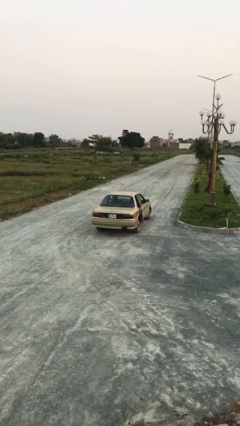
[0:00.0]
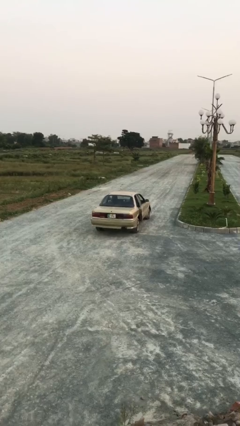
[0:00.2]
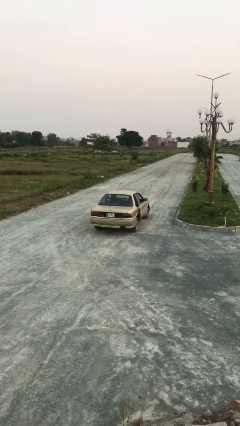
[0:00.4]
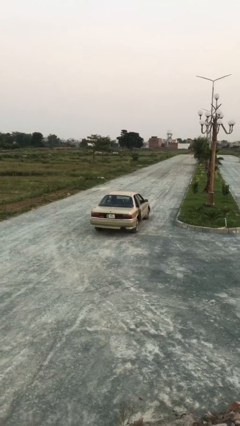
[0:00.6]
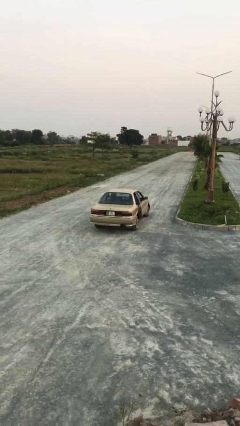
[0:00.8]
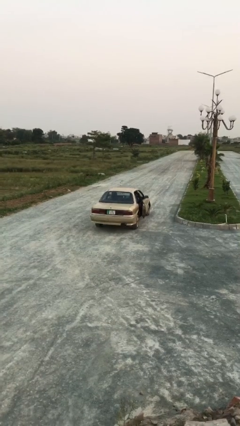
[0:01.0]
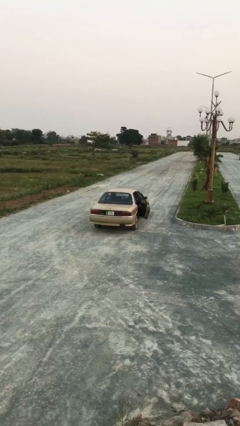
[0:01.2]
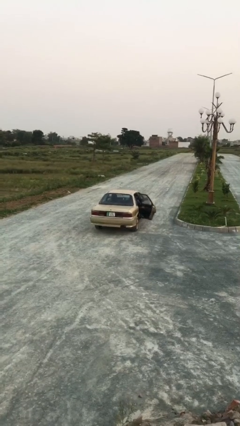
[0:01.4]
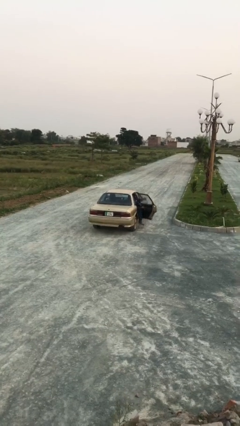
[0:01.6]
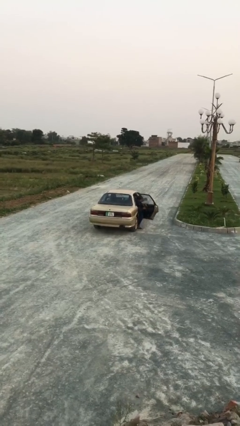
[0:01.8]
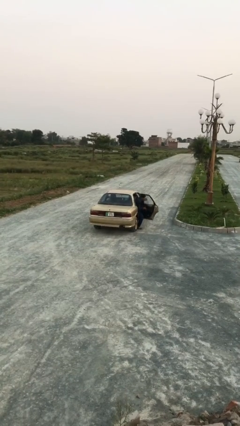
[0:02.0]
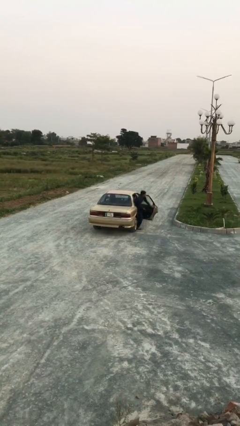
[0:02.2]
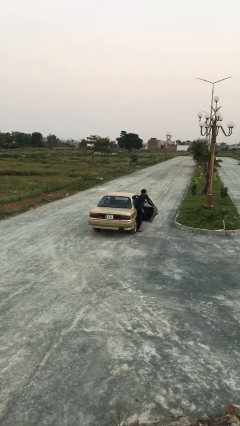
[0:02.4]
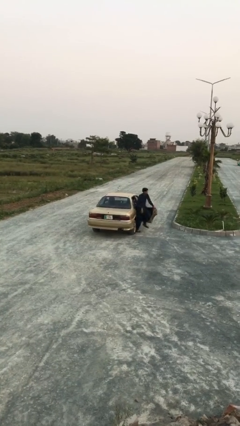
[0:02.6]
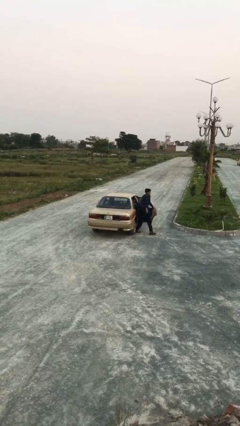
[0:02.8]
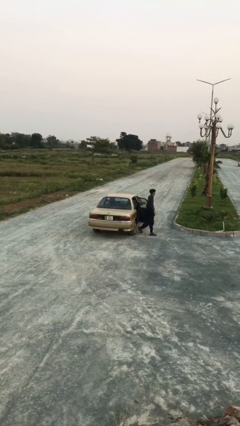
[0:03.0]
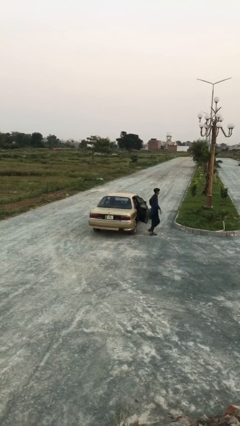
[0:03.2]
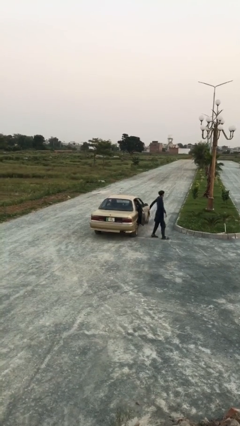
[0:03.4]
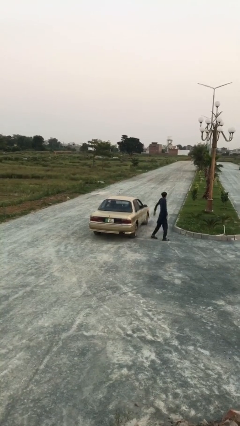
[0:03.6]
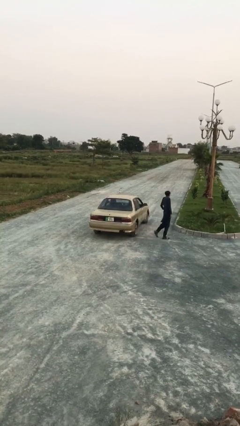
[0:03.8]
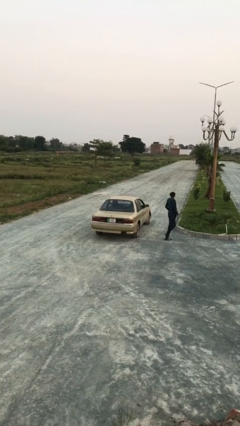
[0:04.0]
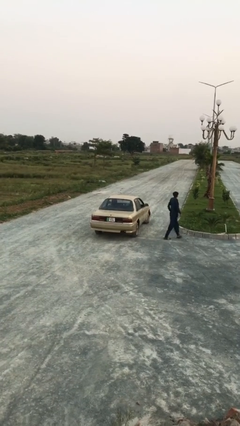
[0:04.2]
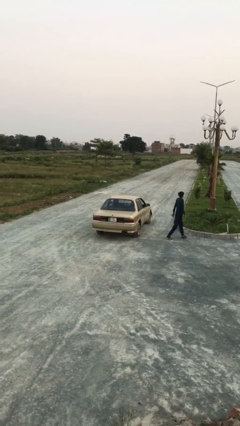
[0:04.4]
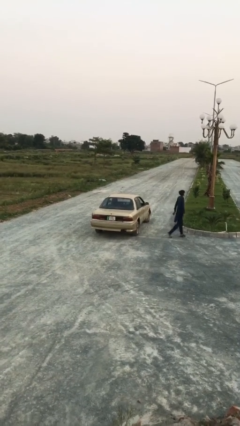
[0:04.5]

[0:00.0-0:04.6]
car drops off person

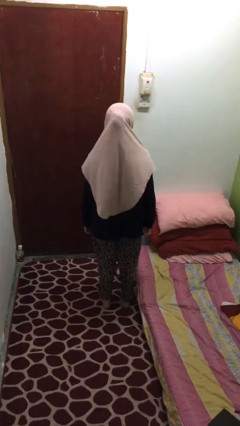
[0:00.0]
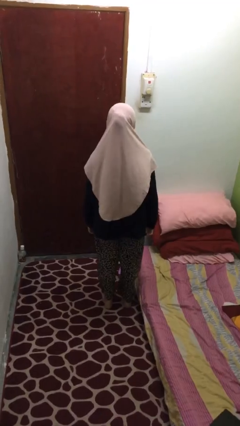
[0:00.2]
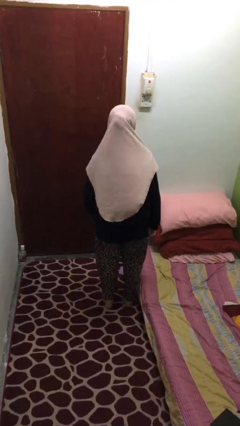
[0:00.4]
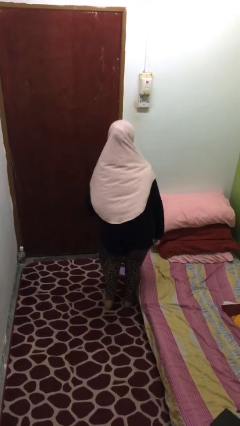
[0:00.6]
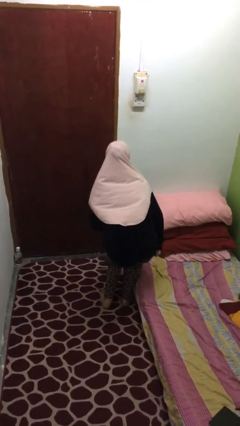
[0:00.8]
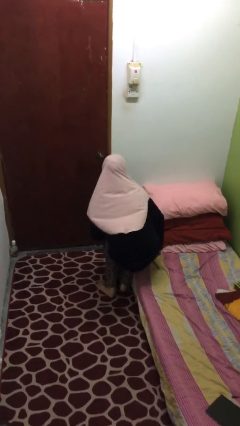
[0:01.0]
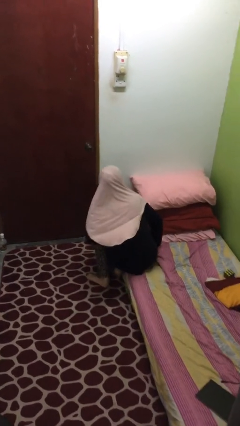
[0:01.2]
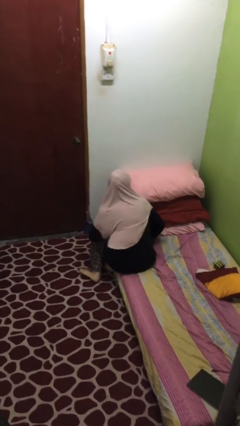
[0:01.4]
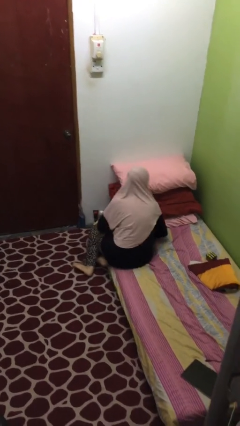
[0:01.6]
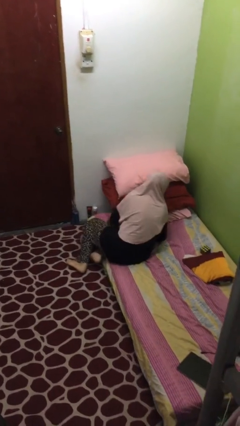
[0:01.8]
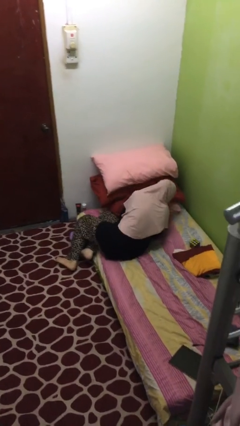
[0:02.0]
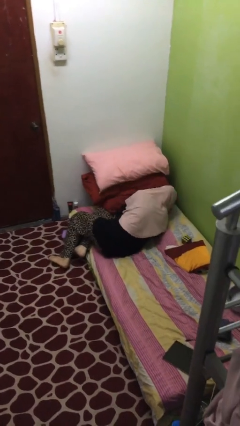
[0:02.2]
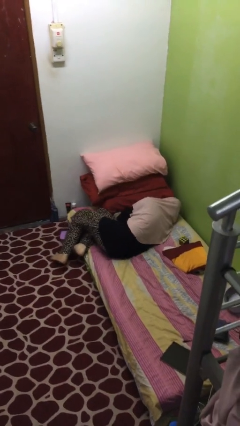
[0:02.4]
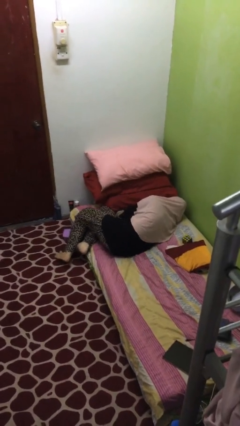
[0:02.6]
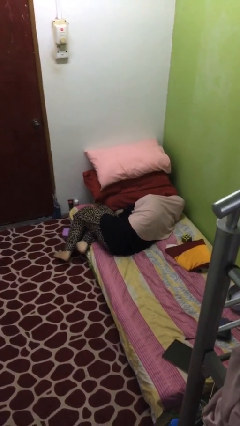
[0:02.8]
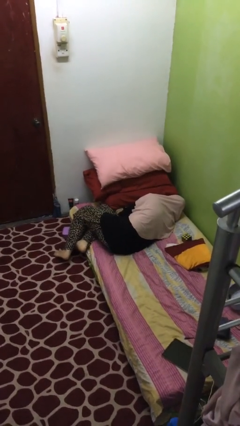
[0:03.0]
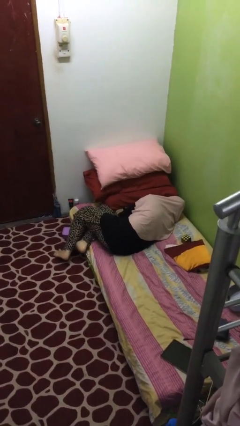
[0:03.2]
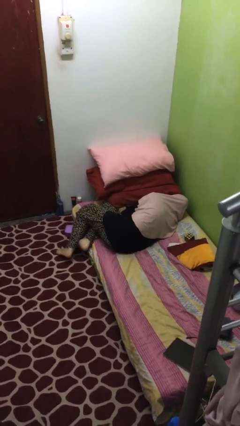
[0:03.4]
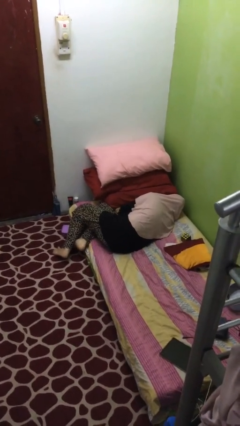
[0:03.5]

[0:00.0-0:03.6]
person lies down on bed

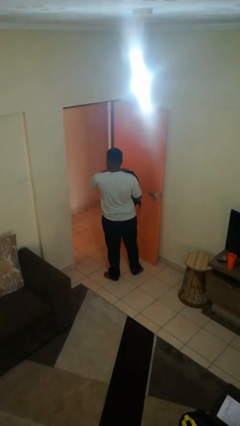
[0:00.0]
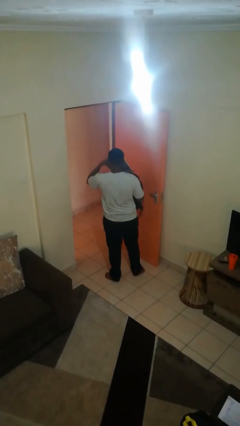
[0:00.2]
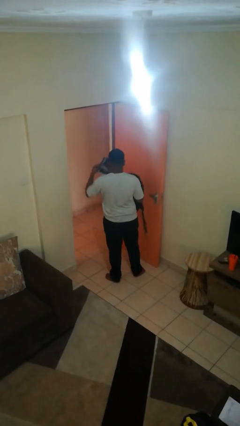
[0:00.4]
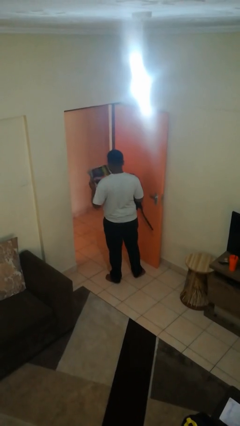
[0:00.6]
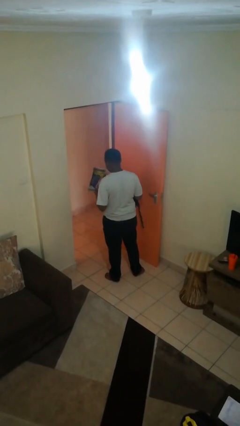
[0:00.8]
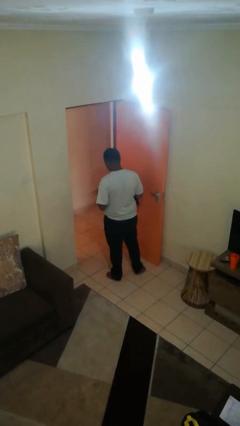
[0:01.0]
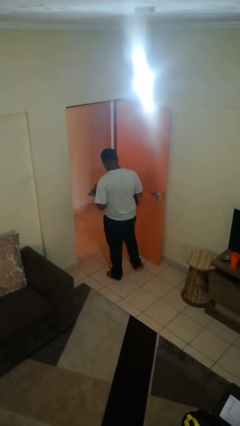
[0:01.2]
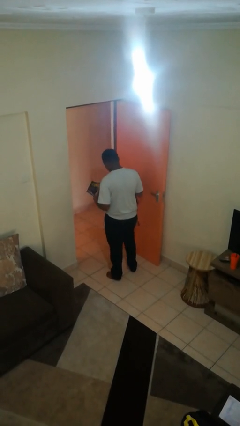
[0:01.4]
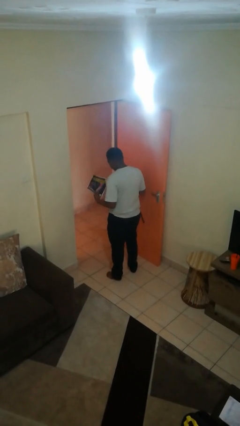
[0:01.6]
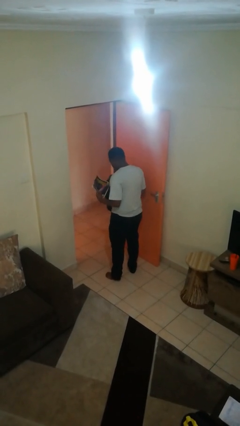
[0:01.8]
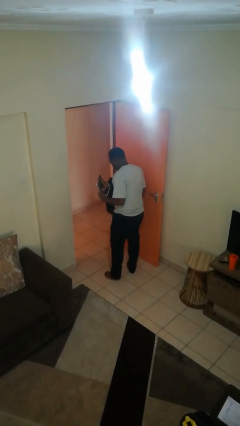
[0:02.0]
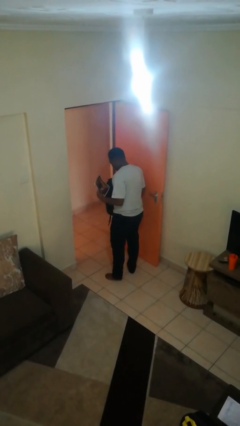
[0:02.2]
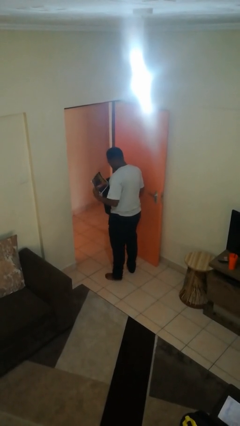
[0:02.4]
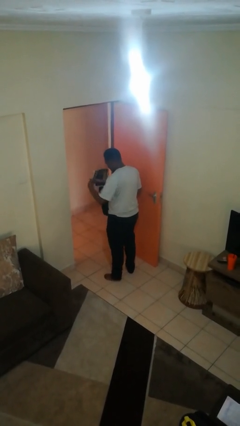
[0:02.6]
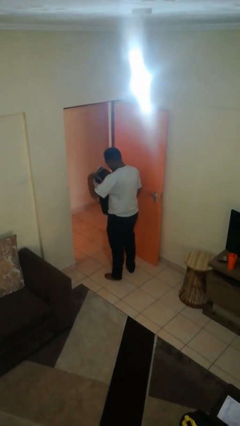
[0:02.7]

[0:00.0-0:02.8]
person takes object from backpack

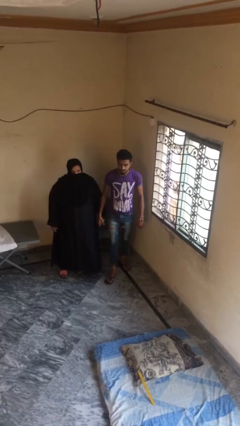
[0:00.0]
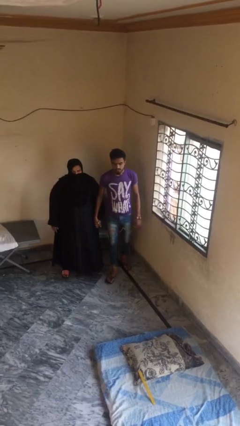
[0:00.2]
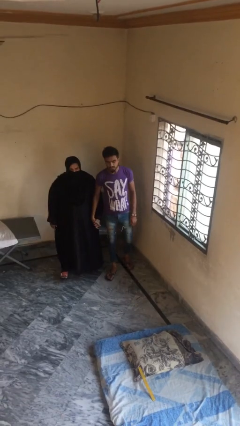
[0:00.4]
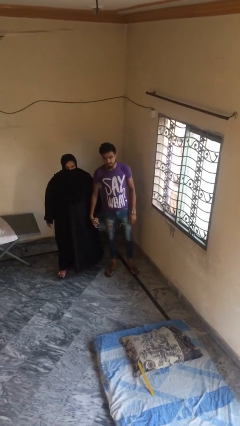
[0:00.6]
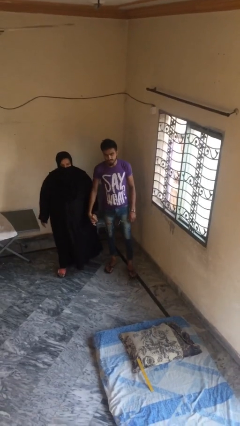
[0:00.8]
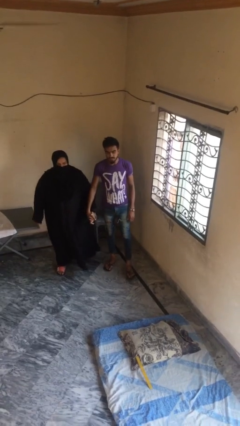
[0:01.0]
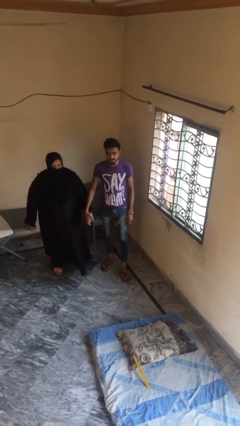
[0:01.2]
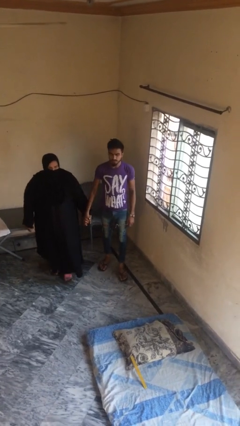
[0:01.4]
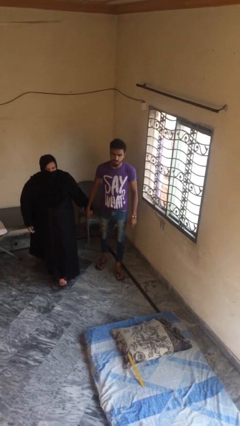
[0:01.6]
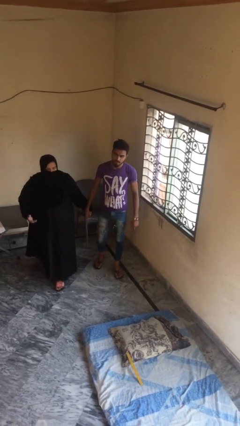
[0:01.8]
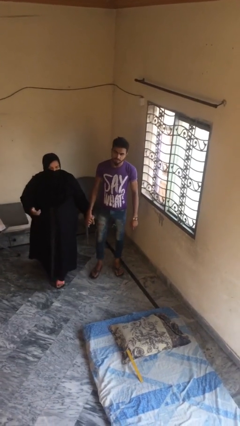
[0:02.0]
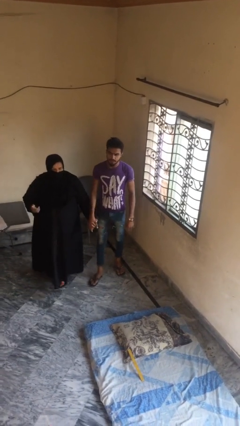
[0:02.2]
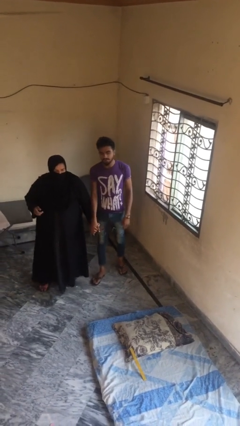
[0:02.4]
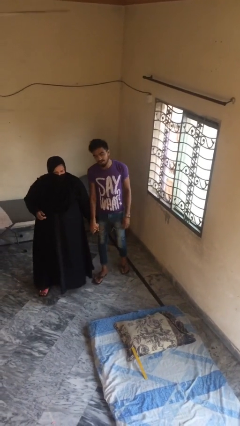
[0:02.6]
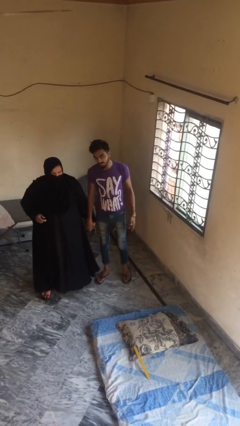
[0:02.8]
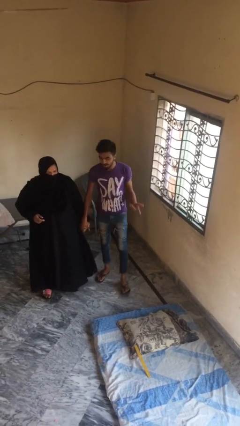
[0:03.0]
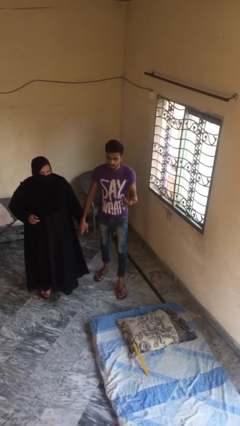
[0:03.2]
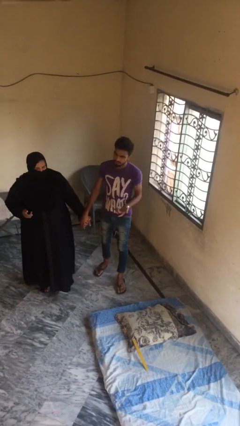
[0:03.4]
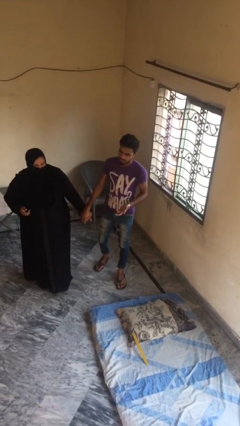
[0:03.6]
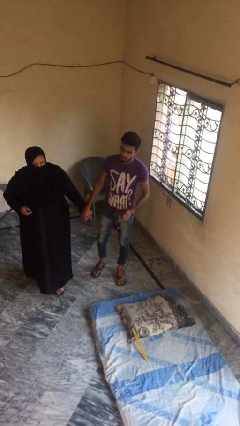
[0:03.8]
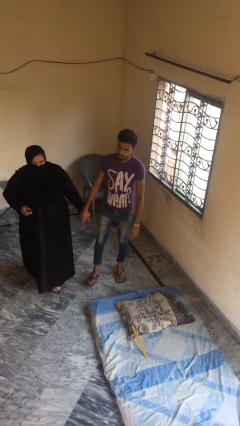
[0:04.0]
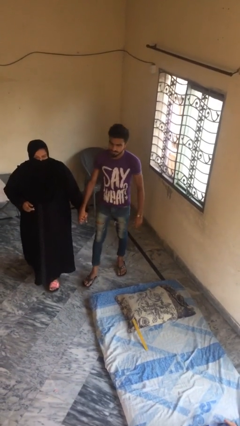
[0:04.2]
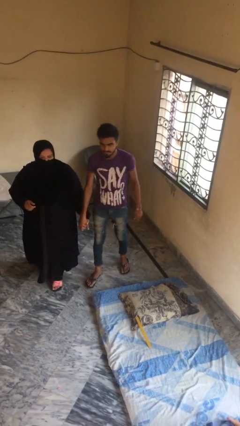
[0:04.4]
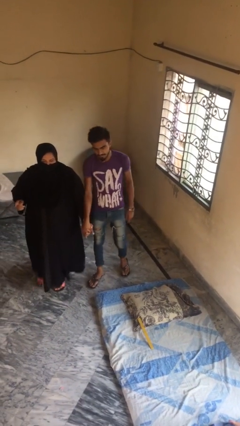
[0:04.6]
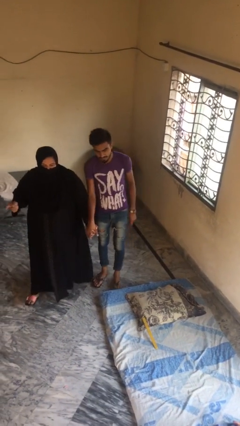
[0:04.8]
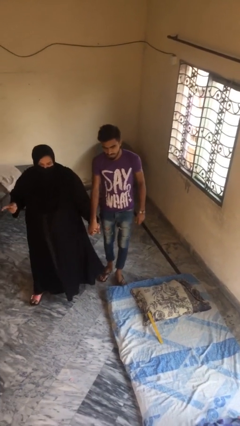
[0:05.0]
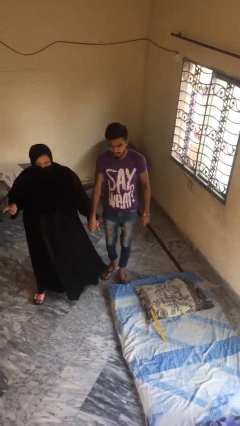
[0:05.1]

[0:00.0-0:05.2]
person holds hand

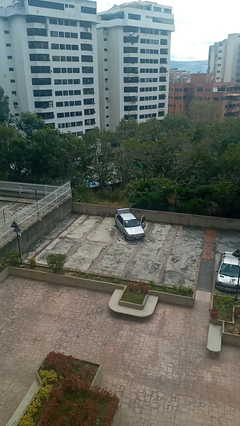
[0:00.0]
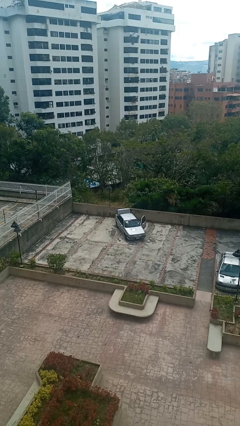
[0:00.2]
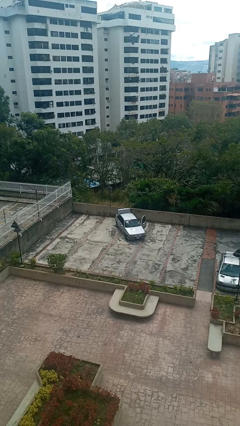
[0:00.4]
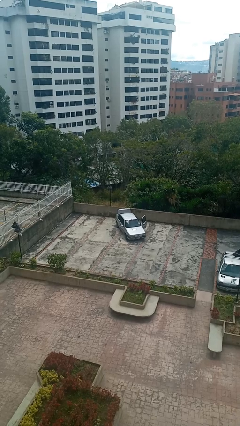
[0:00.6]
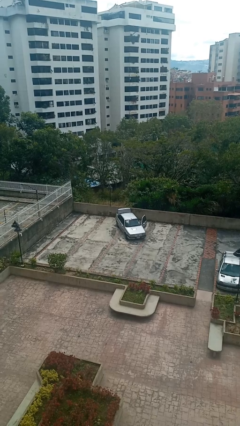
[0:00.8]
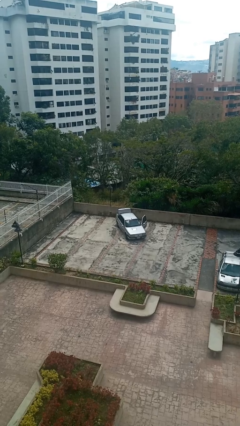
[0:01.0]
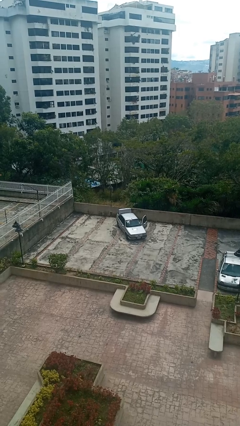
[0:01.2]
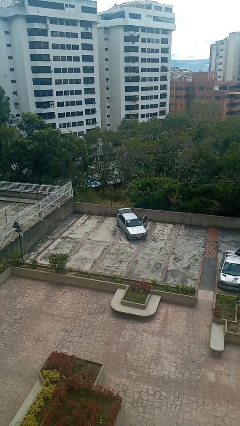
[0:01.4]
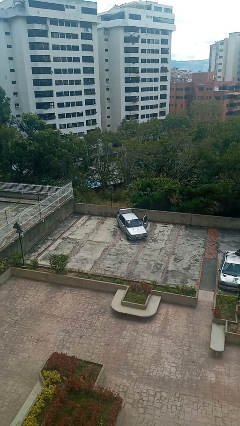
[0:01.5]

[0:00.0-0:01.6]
person loads car
